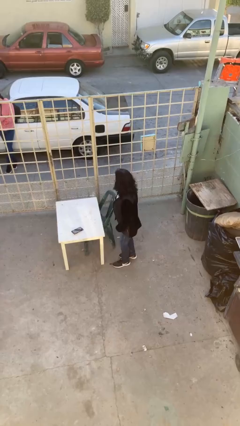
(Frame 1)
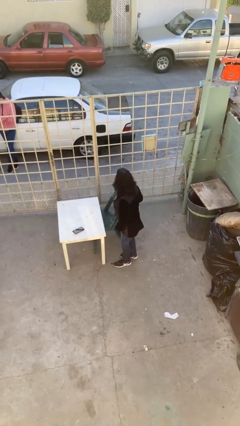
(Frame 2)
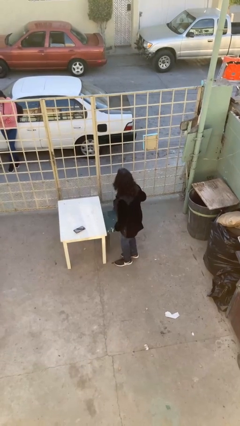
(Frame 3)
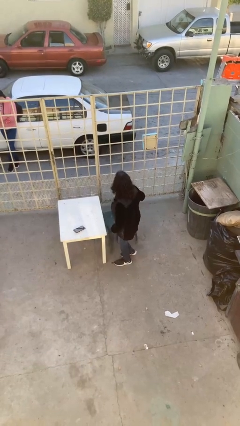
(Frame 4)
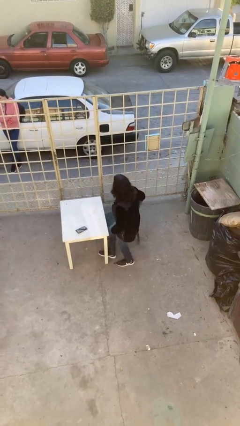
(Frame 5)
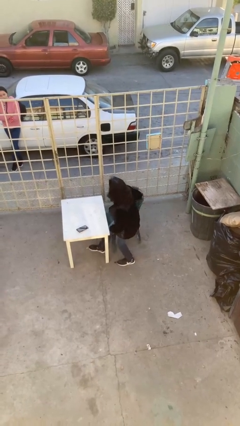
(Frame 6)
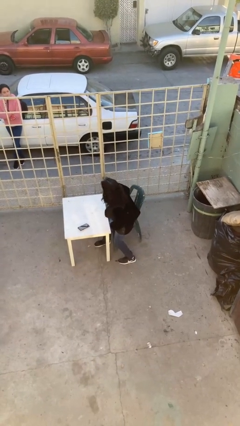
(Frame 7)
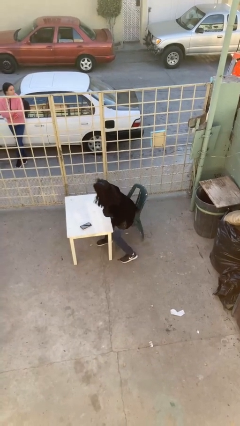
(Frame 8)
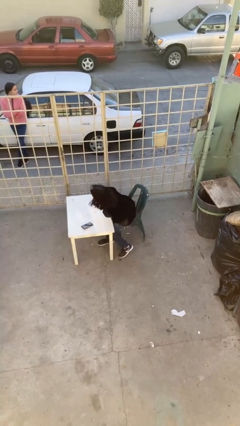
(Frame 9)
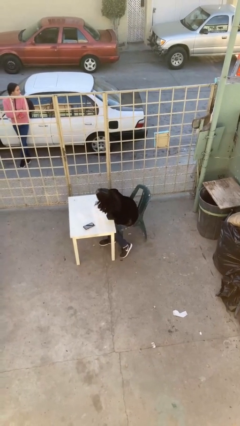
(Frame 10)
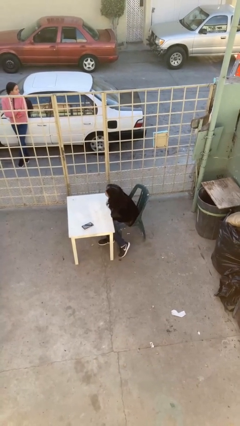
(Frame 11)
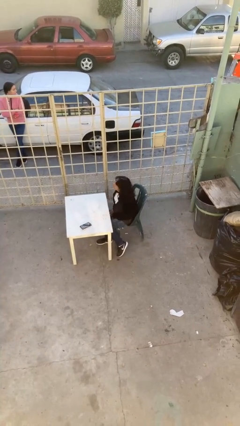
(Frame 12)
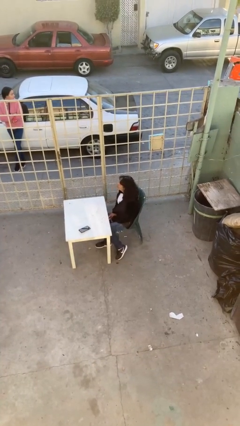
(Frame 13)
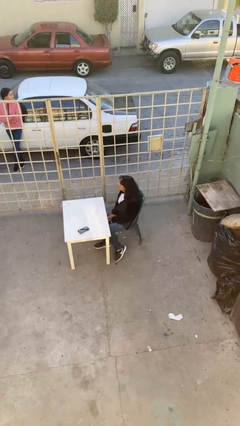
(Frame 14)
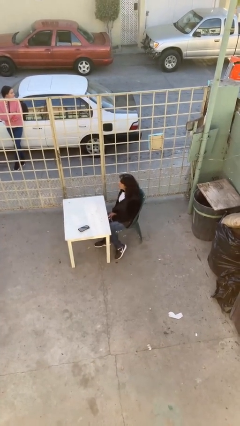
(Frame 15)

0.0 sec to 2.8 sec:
person sits down

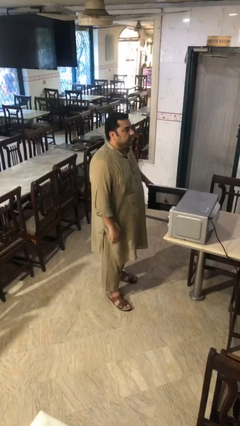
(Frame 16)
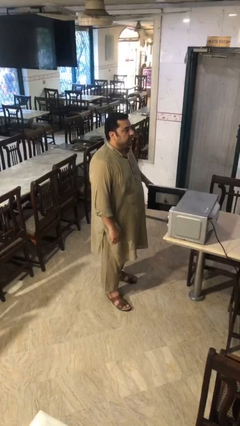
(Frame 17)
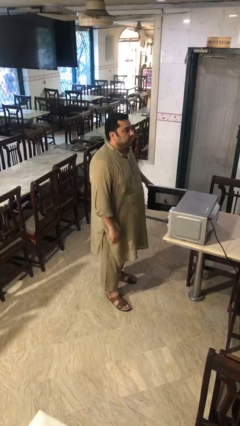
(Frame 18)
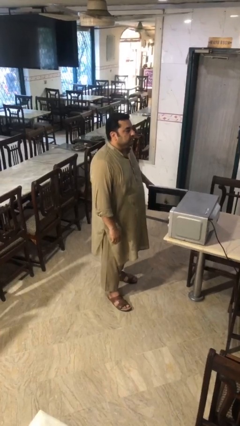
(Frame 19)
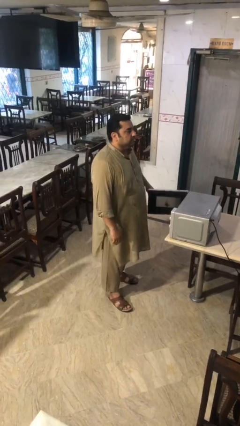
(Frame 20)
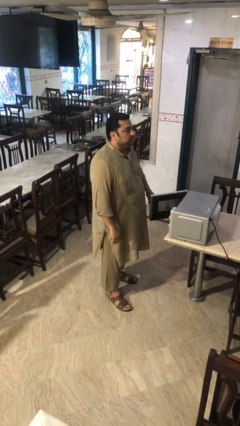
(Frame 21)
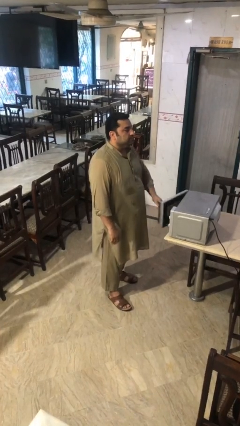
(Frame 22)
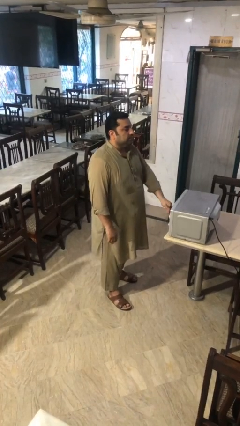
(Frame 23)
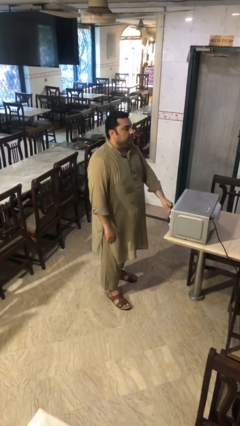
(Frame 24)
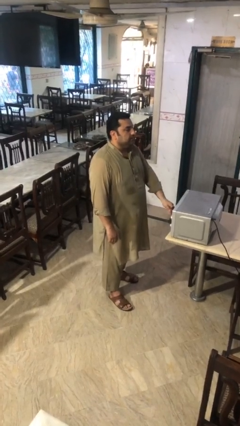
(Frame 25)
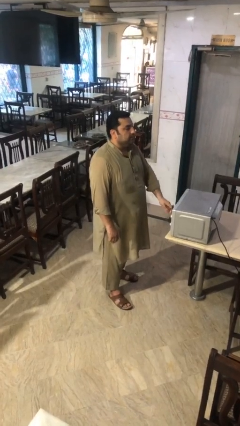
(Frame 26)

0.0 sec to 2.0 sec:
person closes microwave

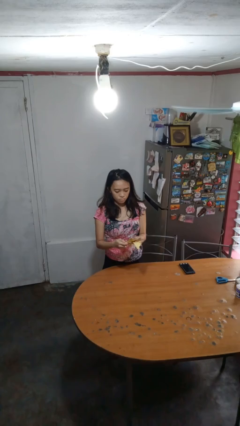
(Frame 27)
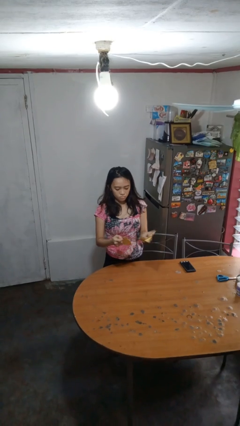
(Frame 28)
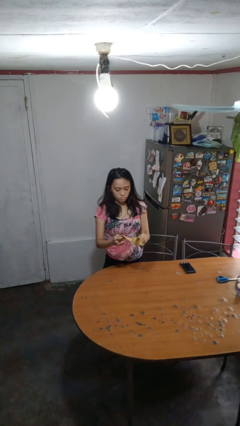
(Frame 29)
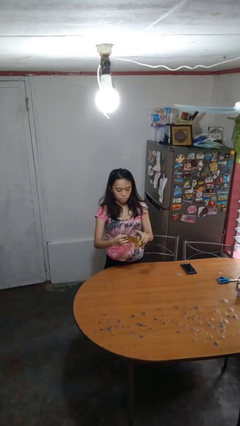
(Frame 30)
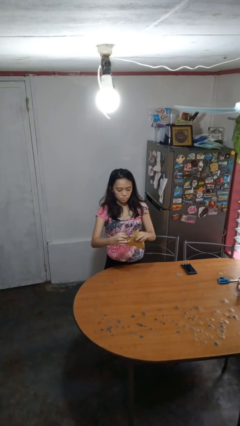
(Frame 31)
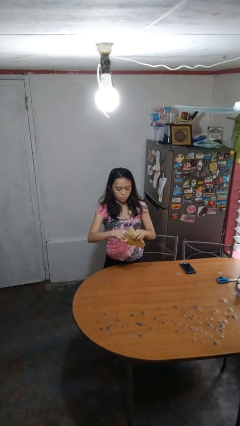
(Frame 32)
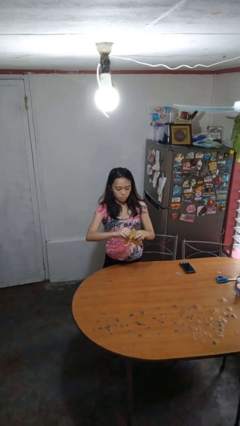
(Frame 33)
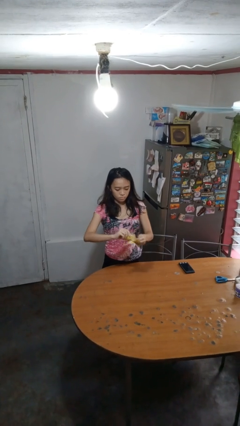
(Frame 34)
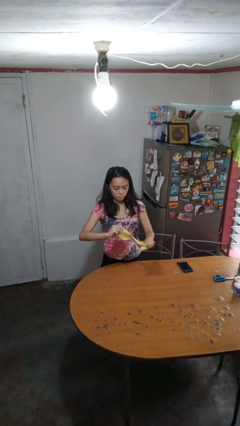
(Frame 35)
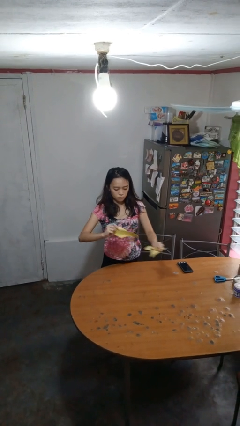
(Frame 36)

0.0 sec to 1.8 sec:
person tears paper

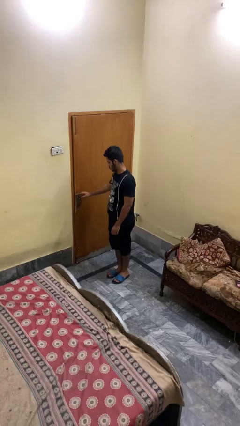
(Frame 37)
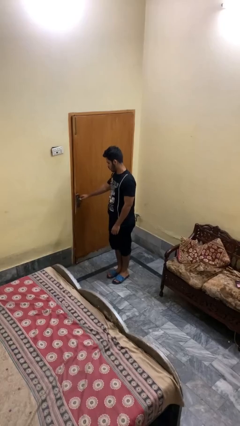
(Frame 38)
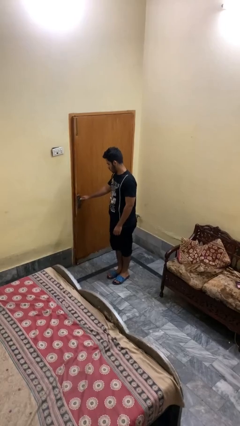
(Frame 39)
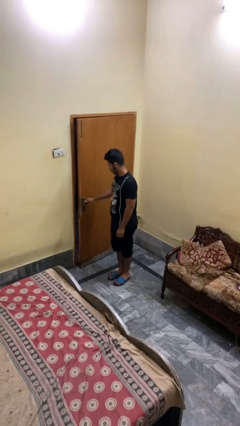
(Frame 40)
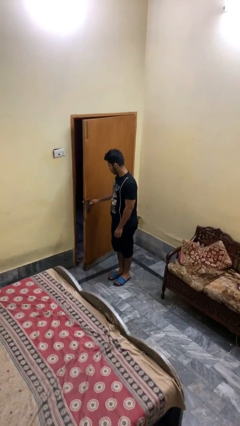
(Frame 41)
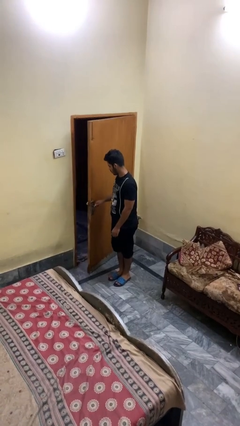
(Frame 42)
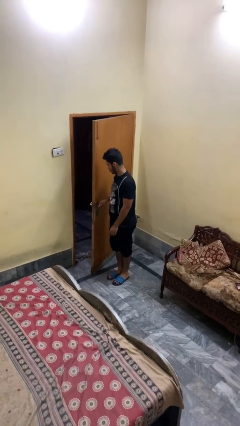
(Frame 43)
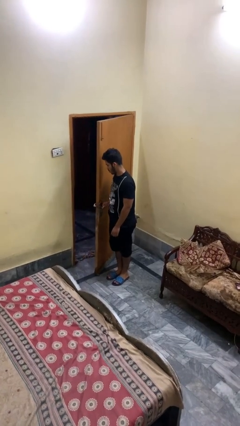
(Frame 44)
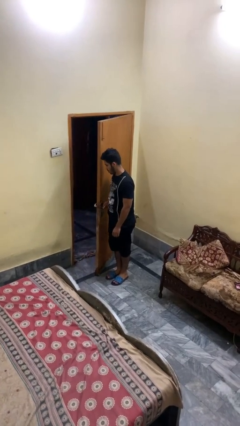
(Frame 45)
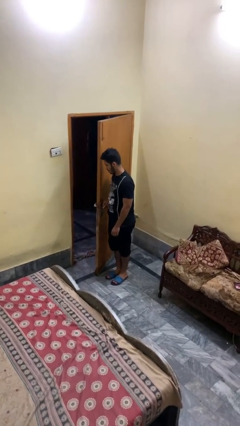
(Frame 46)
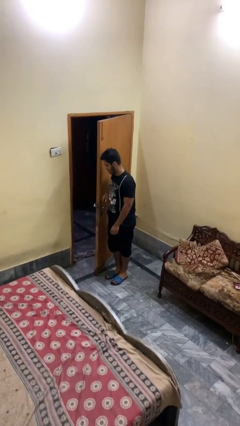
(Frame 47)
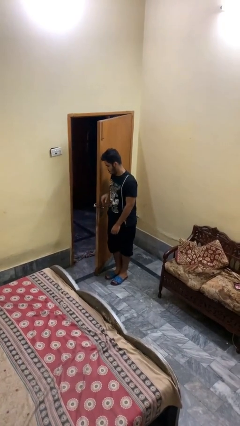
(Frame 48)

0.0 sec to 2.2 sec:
person opens facility door

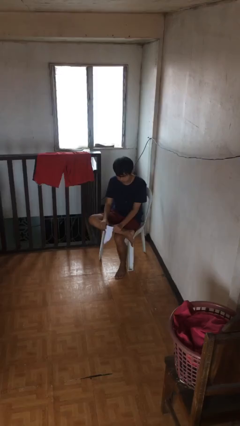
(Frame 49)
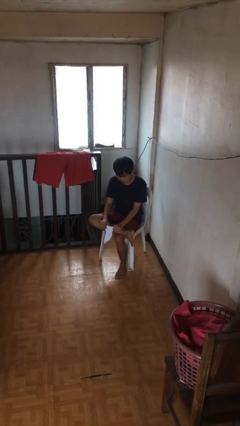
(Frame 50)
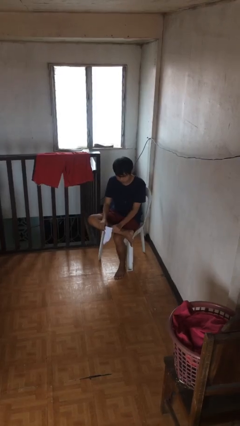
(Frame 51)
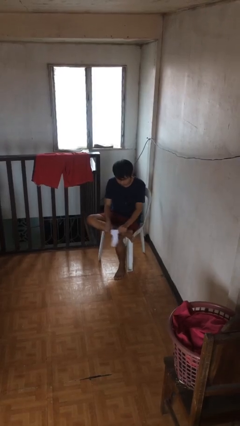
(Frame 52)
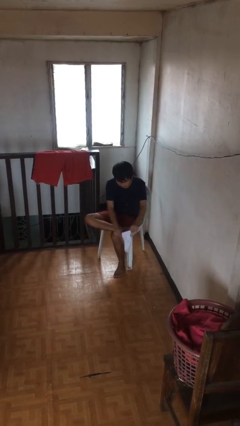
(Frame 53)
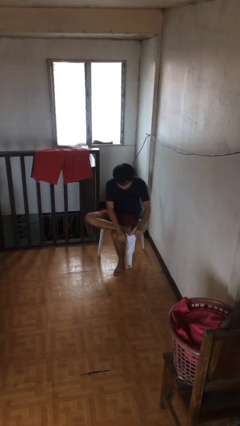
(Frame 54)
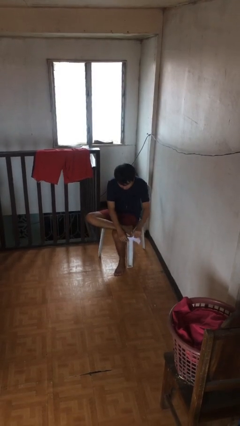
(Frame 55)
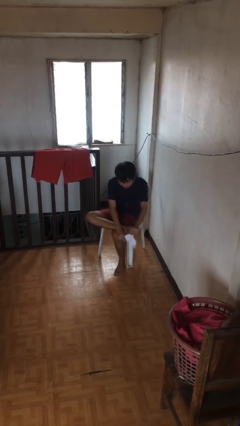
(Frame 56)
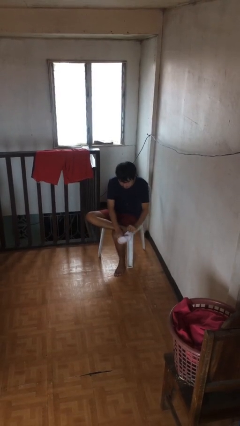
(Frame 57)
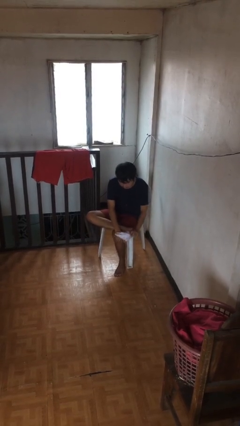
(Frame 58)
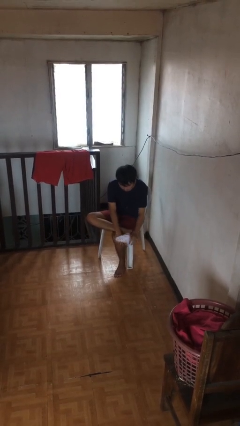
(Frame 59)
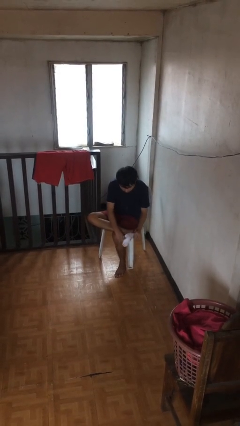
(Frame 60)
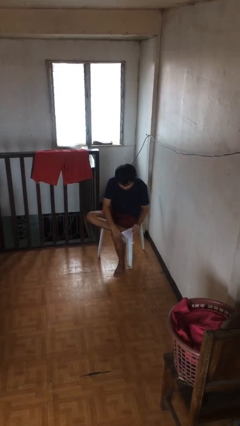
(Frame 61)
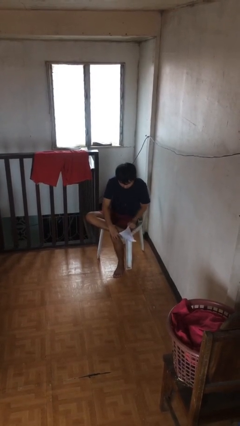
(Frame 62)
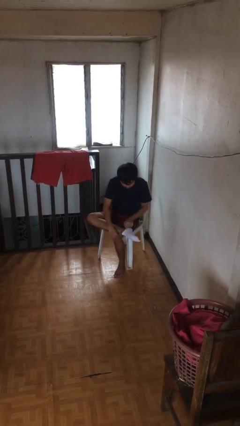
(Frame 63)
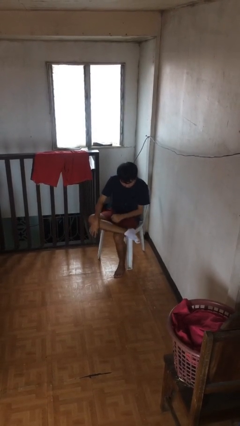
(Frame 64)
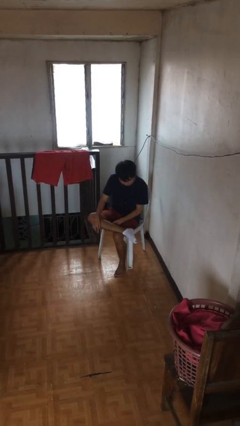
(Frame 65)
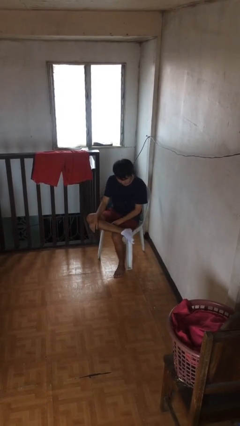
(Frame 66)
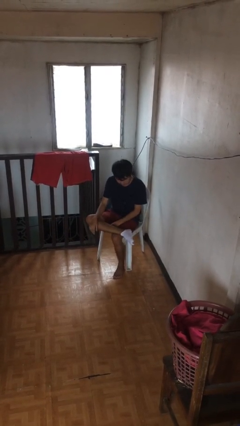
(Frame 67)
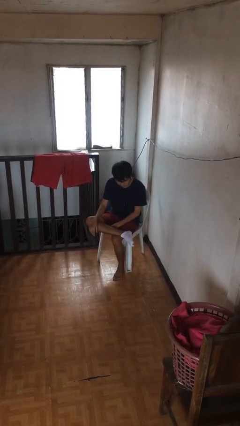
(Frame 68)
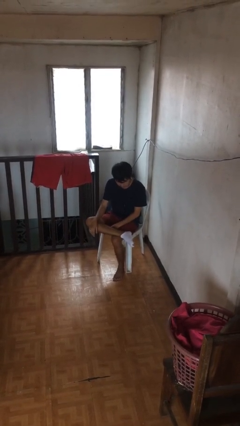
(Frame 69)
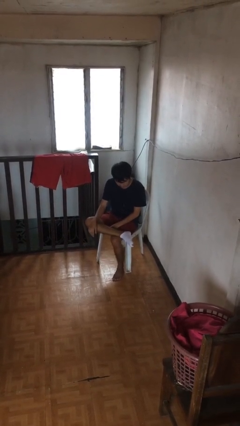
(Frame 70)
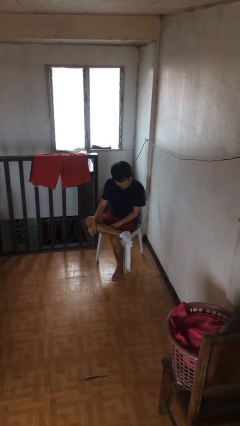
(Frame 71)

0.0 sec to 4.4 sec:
person puts on socks

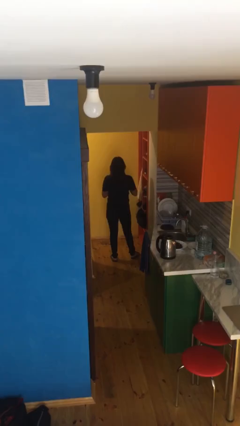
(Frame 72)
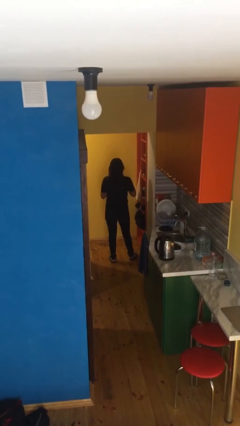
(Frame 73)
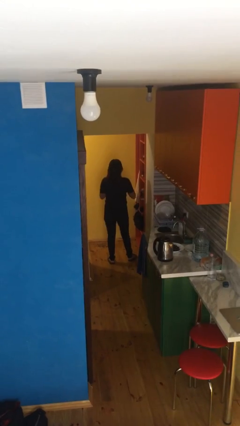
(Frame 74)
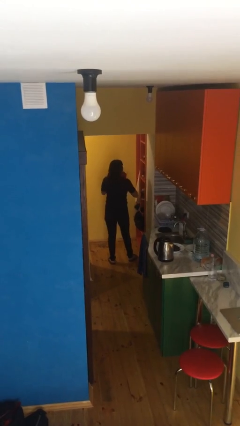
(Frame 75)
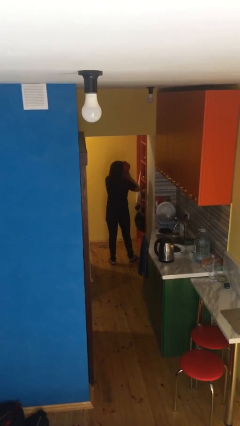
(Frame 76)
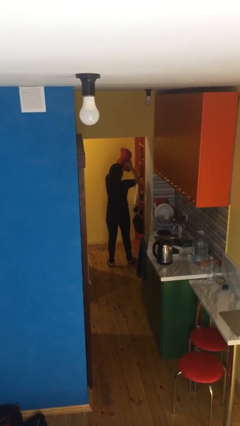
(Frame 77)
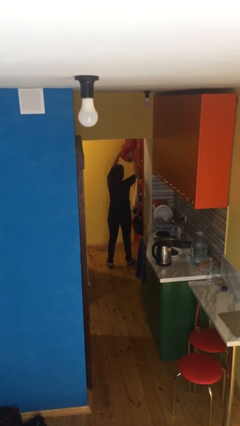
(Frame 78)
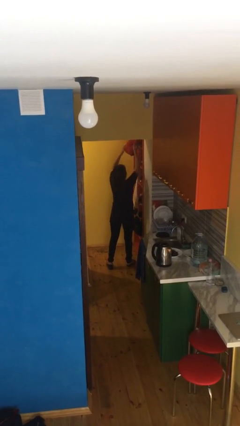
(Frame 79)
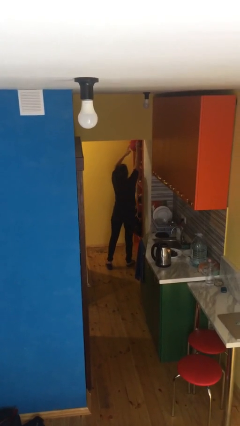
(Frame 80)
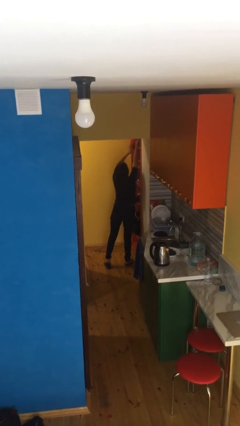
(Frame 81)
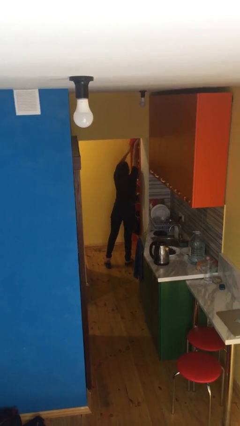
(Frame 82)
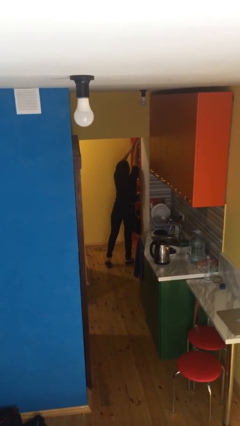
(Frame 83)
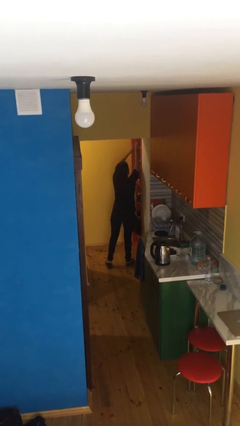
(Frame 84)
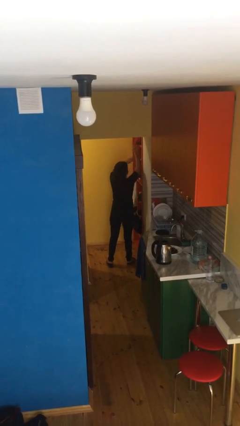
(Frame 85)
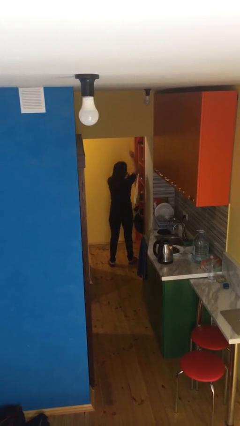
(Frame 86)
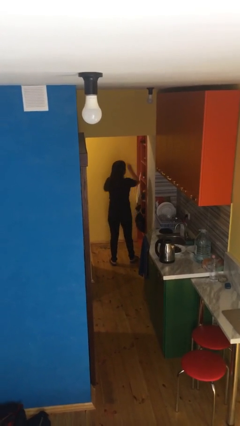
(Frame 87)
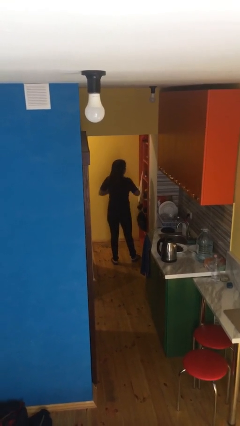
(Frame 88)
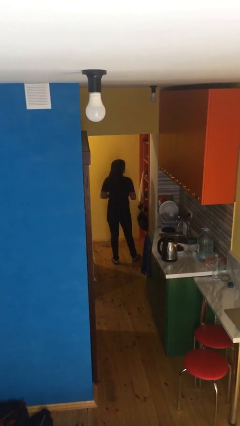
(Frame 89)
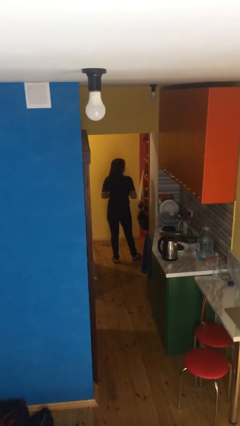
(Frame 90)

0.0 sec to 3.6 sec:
person puts down object on shelf

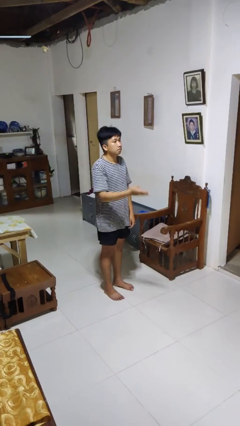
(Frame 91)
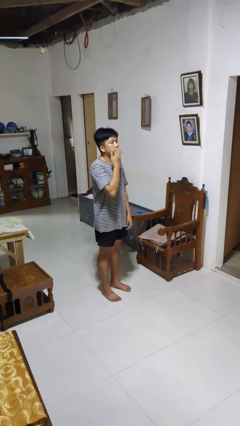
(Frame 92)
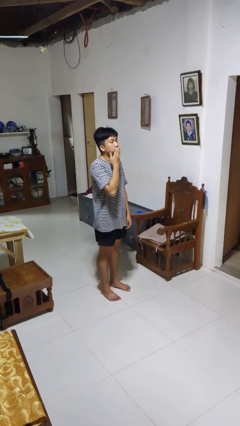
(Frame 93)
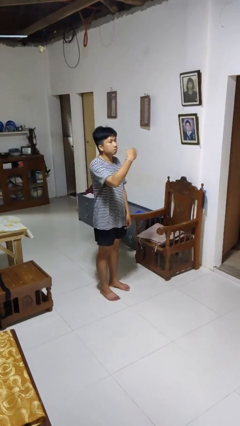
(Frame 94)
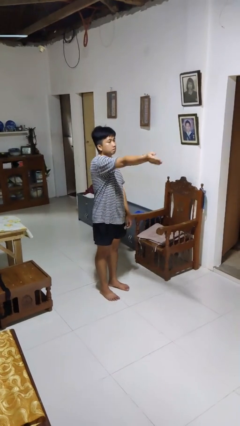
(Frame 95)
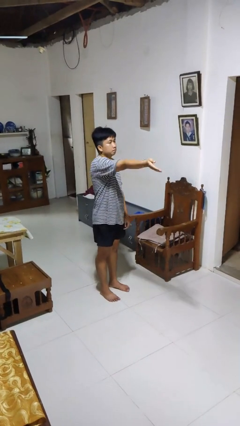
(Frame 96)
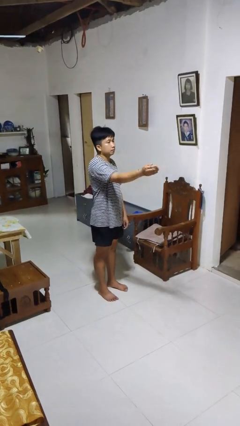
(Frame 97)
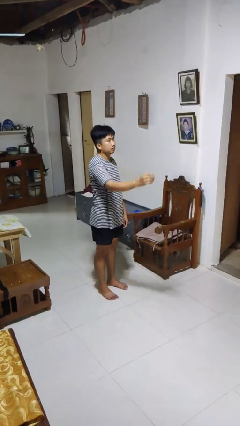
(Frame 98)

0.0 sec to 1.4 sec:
person gestures blow kiss
